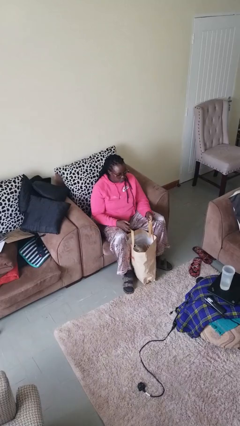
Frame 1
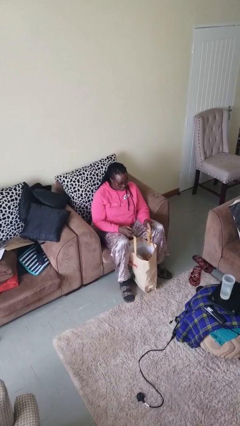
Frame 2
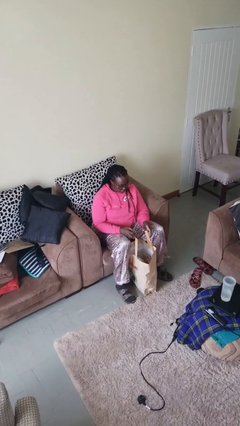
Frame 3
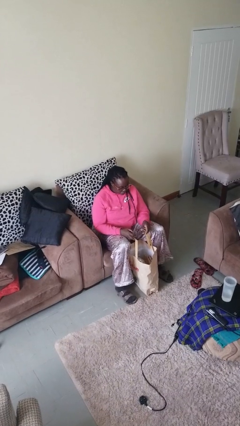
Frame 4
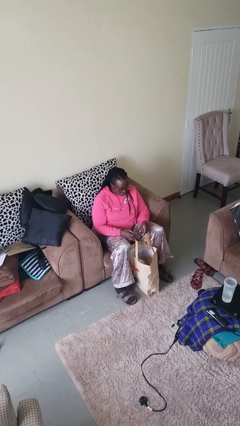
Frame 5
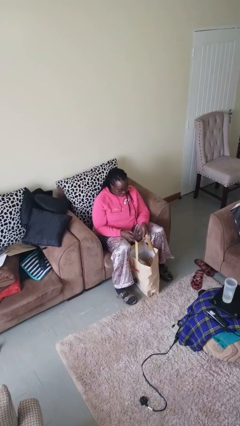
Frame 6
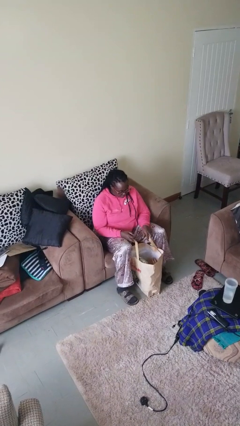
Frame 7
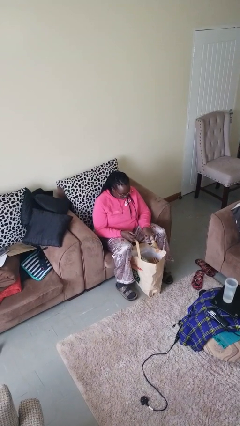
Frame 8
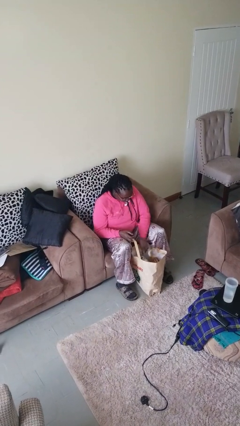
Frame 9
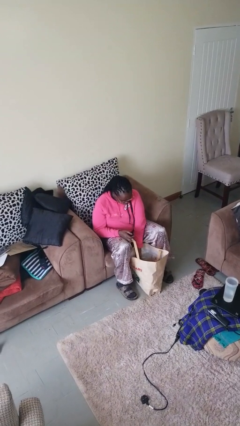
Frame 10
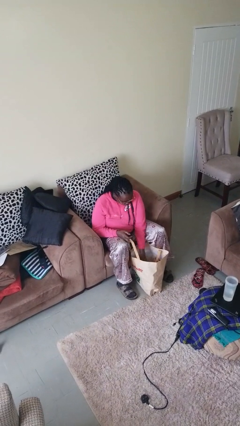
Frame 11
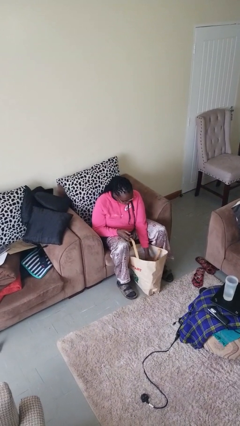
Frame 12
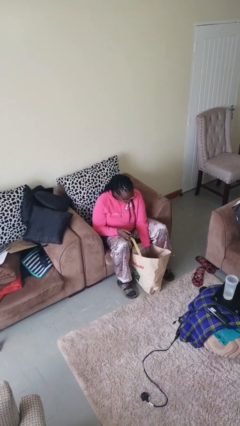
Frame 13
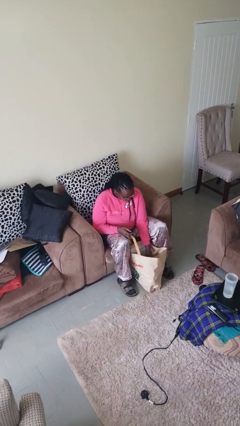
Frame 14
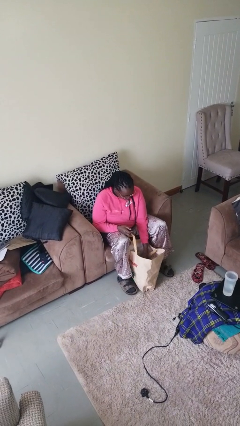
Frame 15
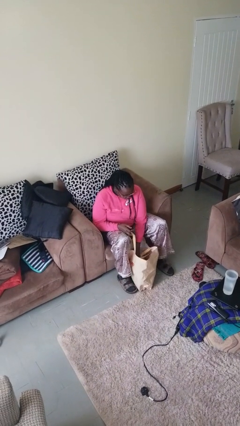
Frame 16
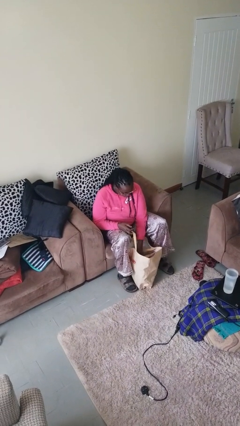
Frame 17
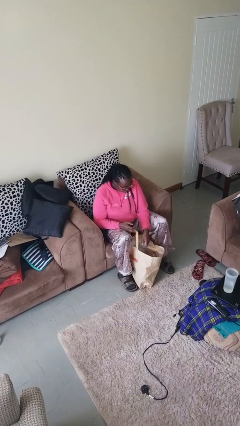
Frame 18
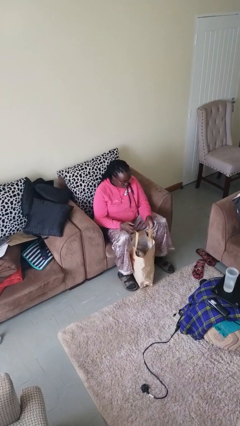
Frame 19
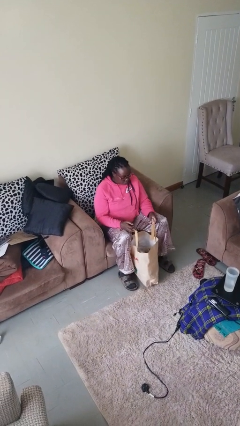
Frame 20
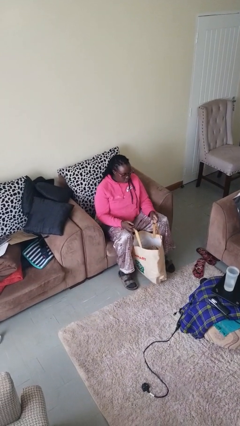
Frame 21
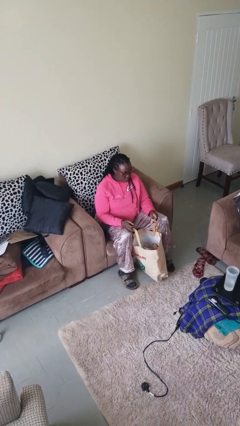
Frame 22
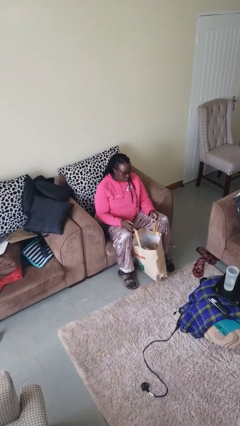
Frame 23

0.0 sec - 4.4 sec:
person searches in bag

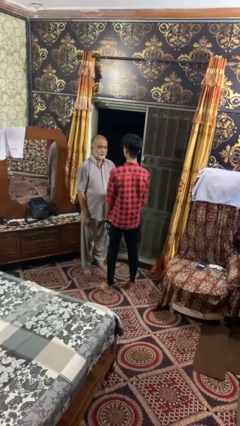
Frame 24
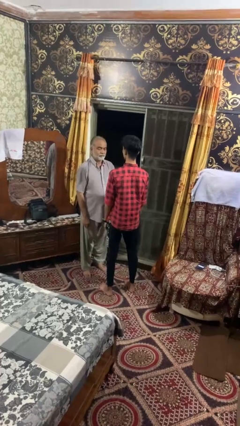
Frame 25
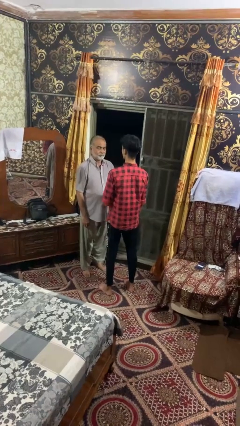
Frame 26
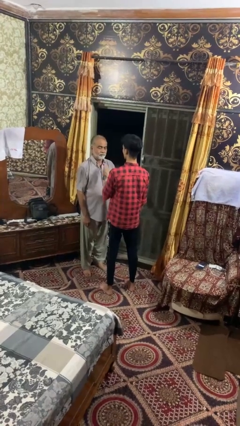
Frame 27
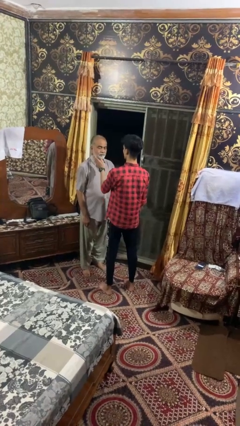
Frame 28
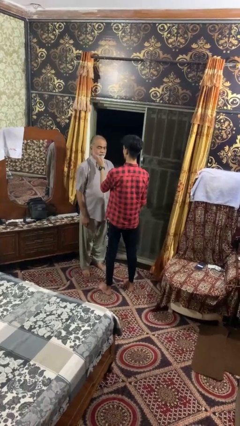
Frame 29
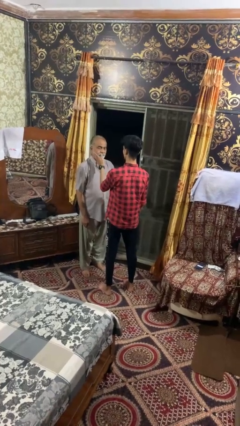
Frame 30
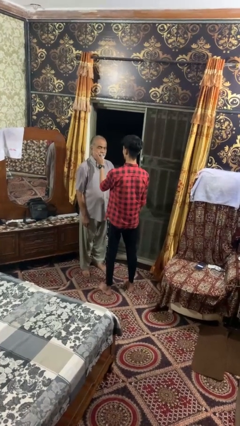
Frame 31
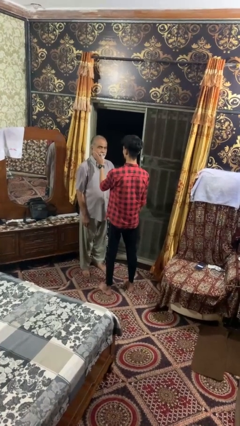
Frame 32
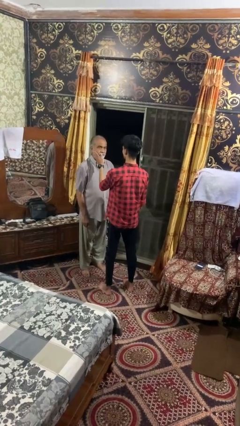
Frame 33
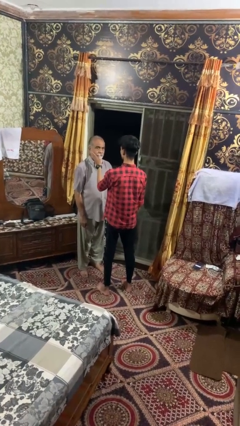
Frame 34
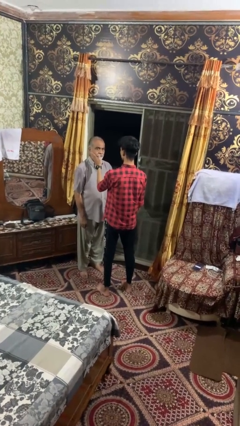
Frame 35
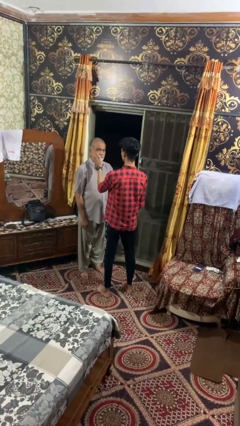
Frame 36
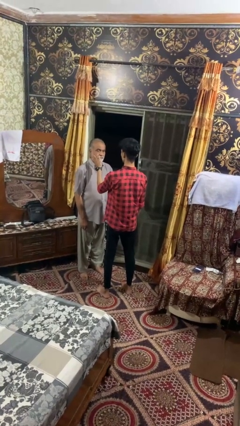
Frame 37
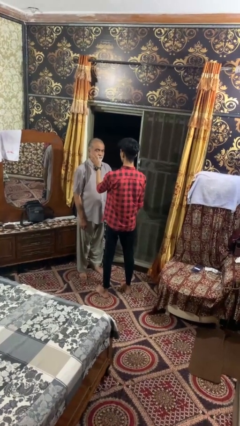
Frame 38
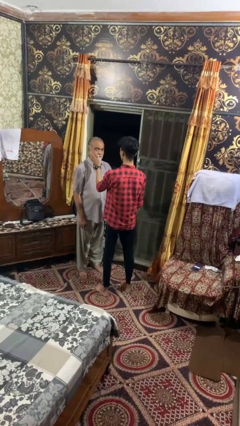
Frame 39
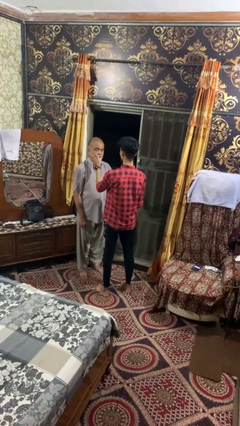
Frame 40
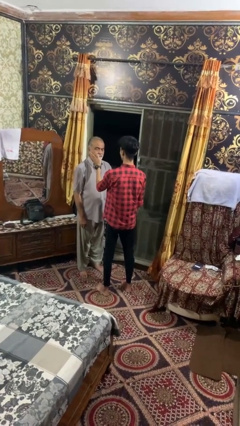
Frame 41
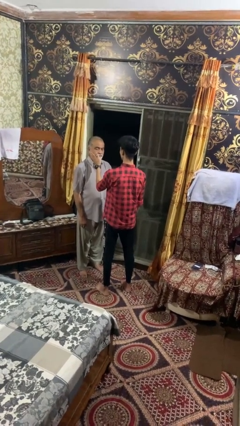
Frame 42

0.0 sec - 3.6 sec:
person touches face of person

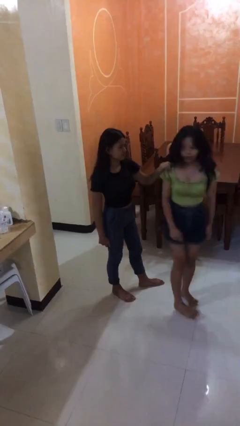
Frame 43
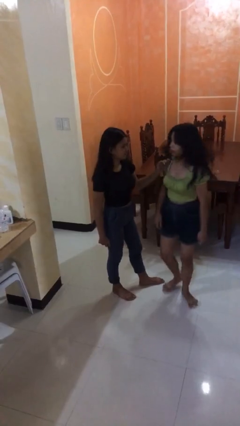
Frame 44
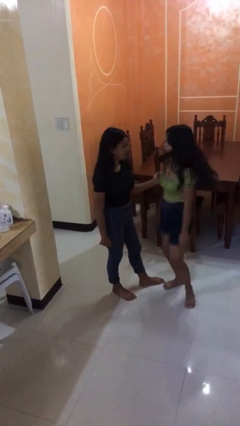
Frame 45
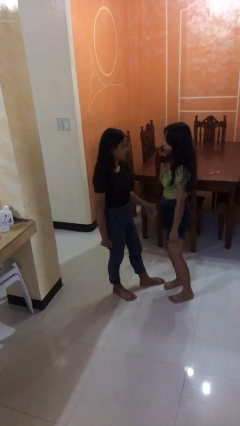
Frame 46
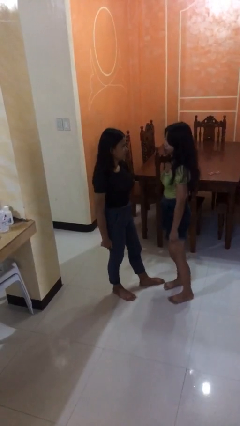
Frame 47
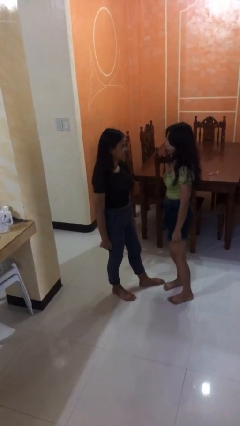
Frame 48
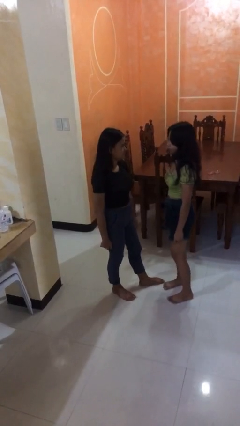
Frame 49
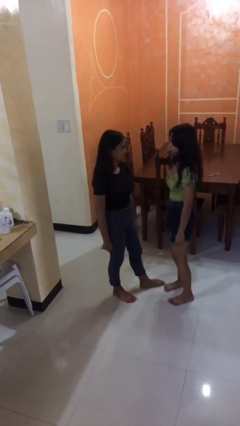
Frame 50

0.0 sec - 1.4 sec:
person spins person around

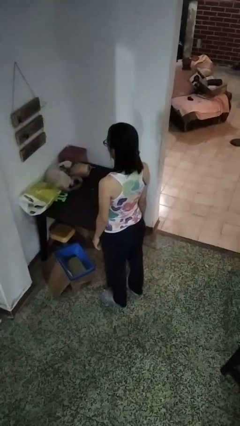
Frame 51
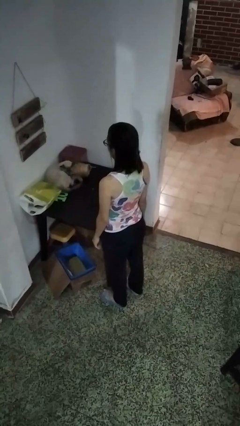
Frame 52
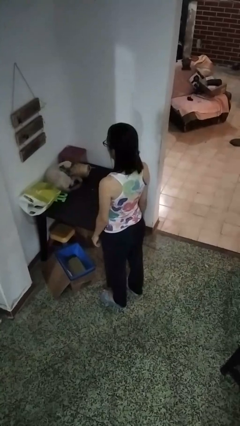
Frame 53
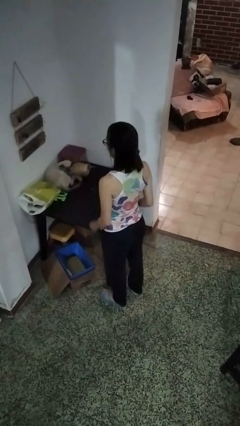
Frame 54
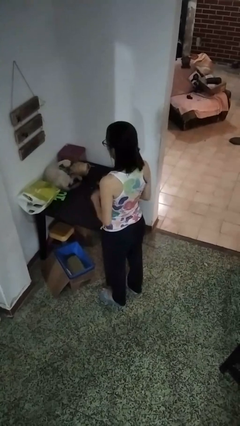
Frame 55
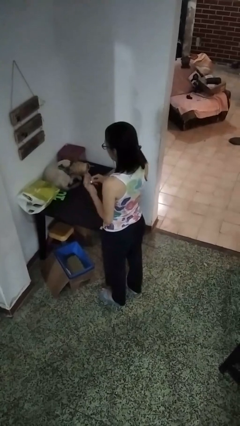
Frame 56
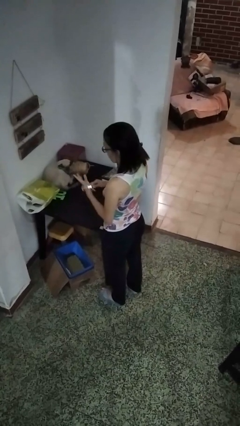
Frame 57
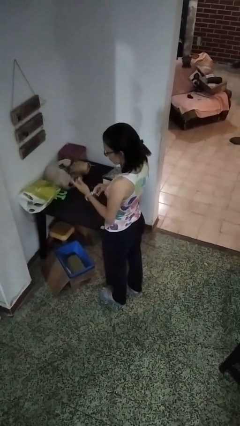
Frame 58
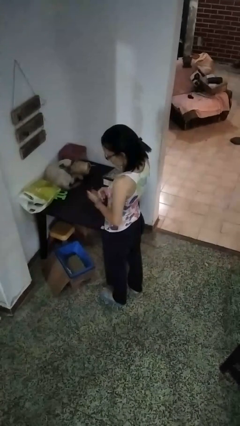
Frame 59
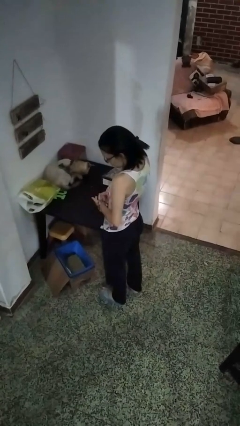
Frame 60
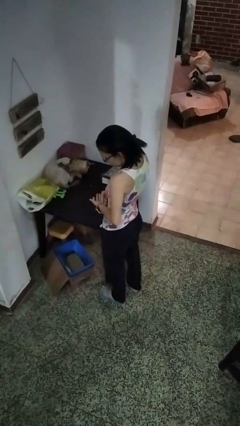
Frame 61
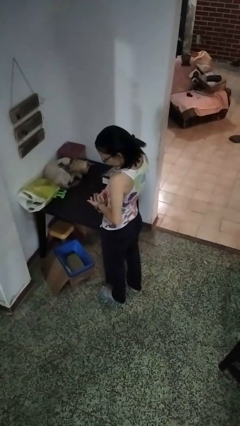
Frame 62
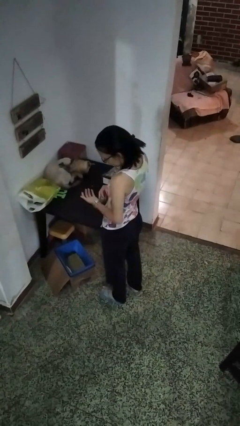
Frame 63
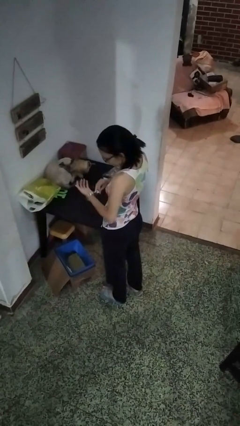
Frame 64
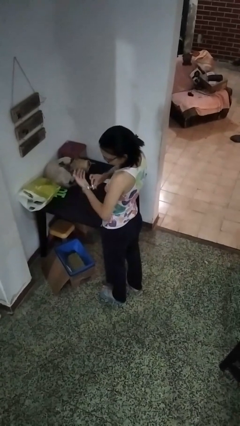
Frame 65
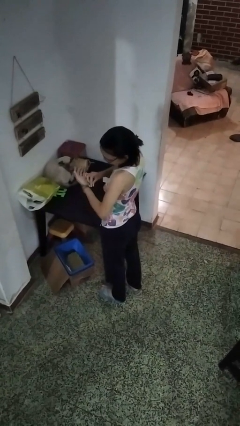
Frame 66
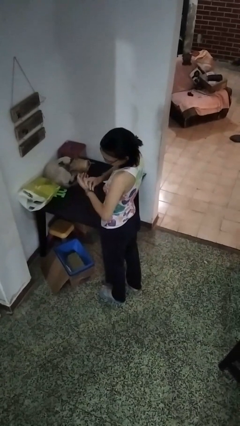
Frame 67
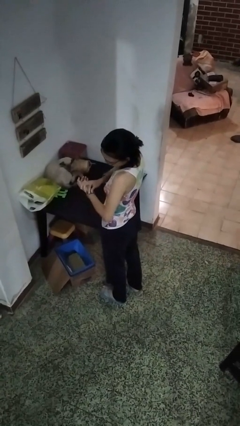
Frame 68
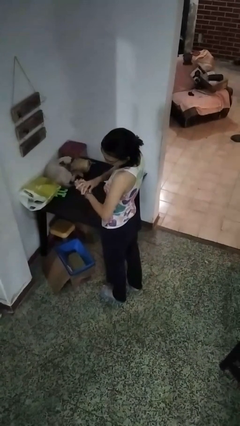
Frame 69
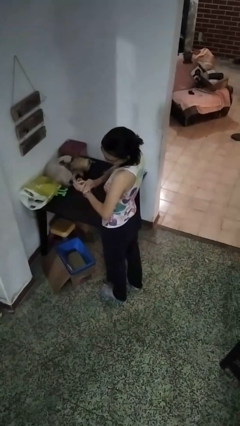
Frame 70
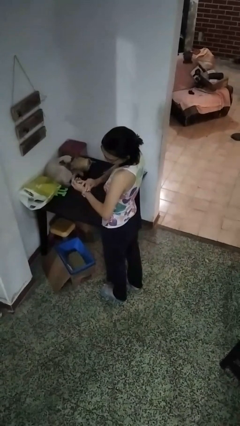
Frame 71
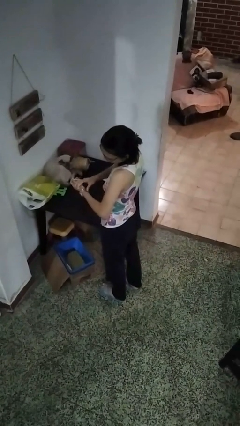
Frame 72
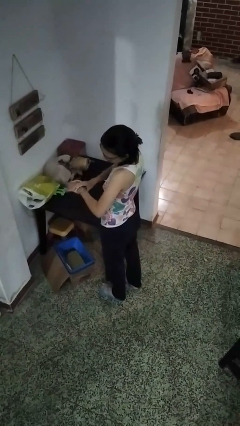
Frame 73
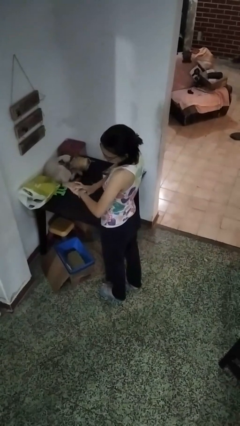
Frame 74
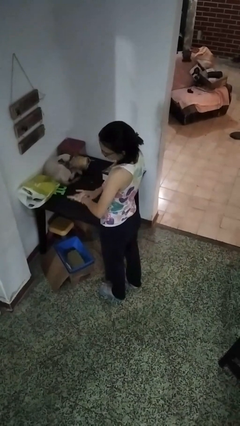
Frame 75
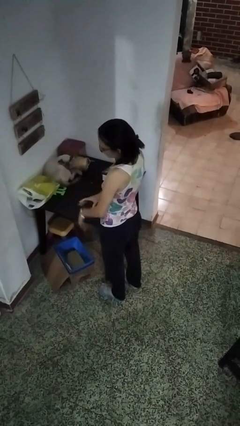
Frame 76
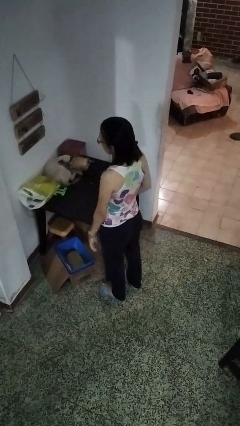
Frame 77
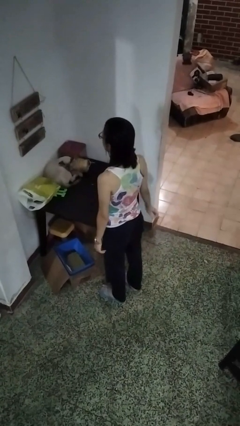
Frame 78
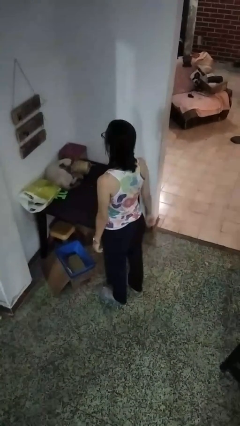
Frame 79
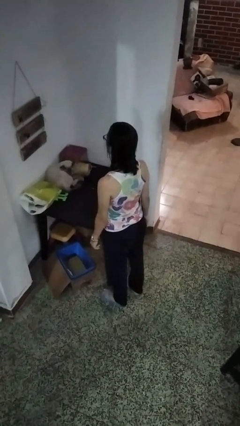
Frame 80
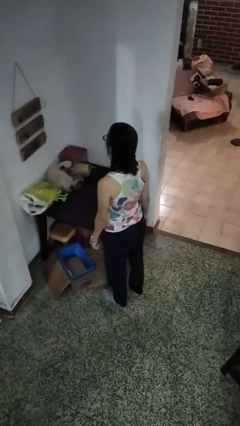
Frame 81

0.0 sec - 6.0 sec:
person puts on wristwatch

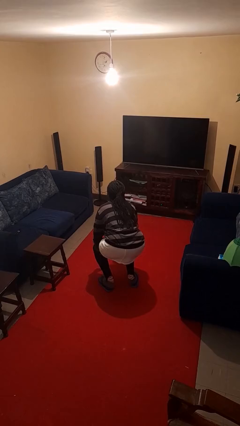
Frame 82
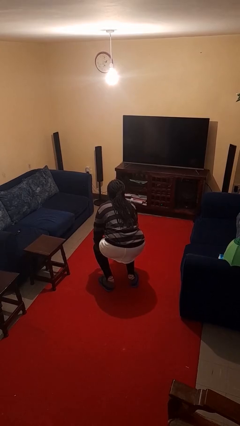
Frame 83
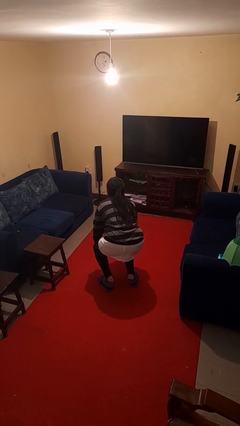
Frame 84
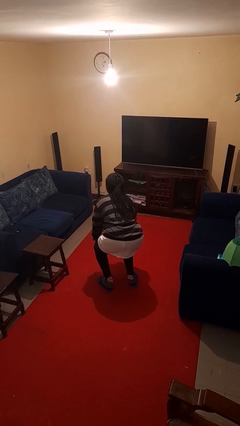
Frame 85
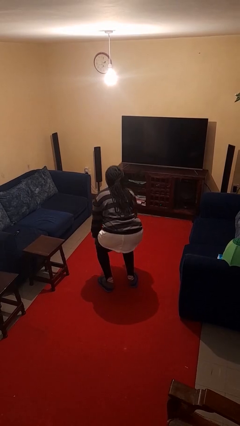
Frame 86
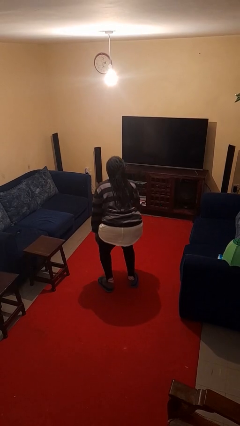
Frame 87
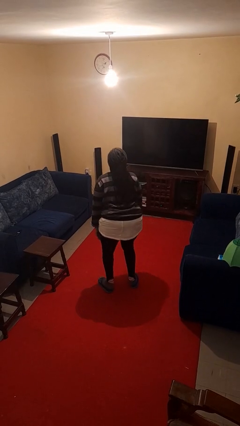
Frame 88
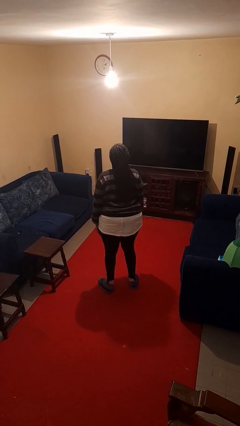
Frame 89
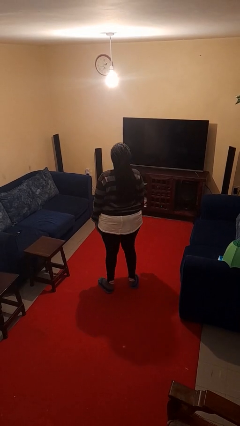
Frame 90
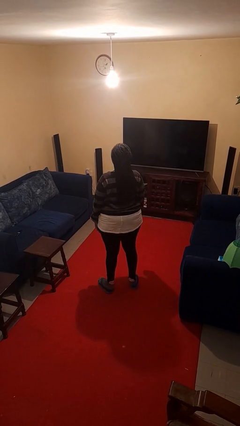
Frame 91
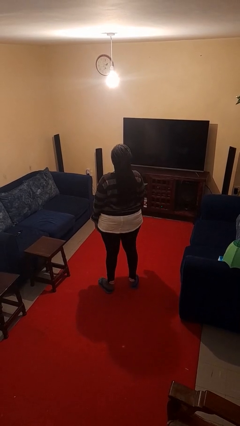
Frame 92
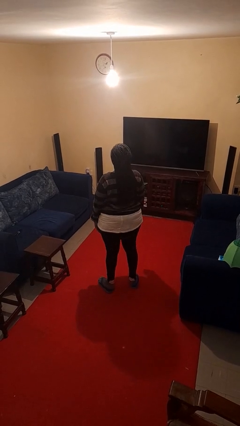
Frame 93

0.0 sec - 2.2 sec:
person stands up
